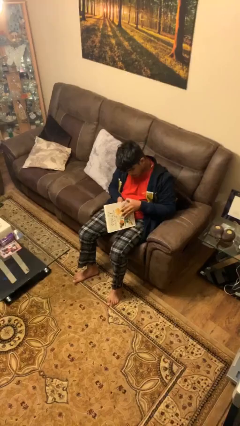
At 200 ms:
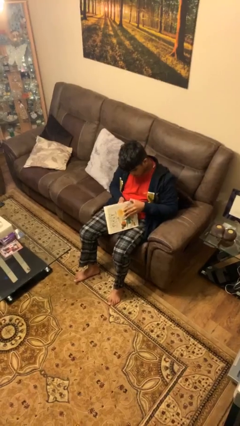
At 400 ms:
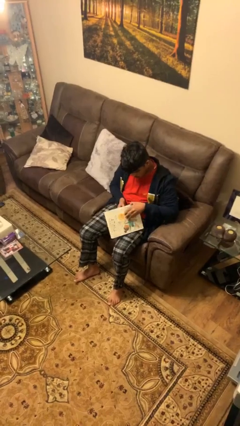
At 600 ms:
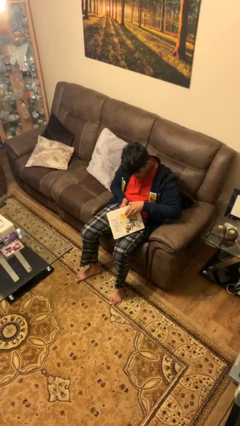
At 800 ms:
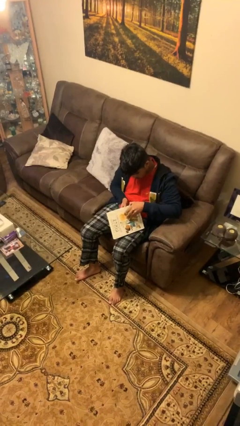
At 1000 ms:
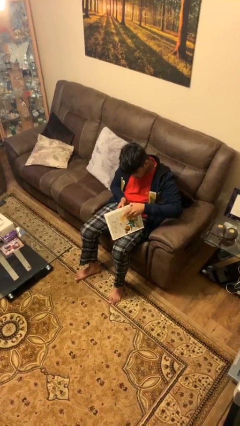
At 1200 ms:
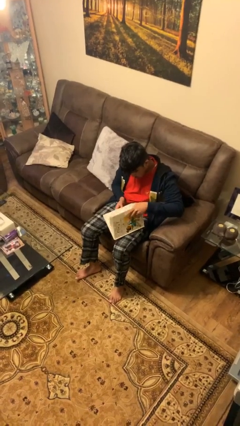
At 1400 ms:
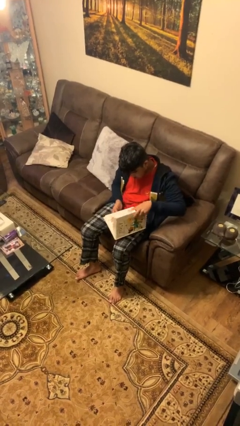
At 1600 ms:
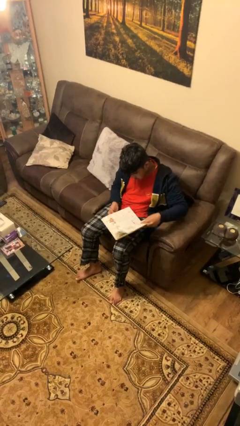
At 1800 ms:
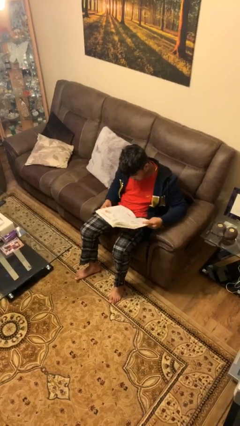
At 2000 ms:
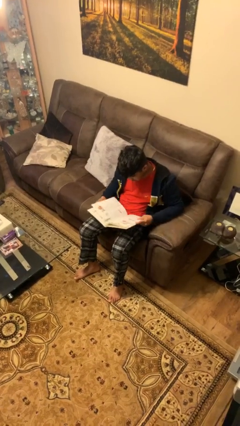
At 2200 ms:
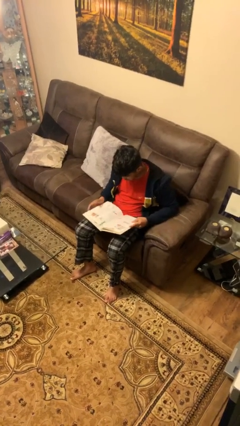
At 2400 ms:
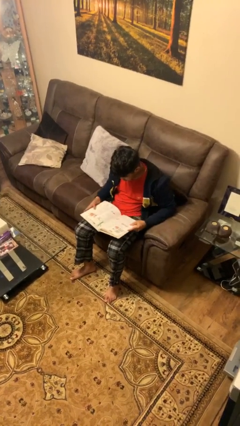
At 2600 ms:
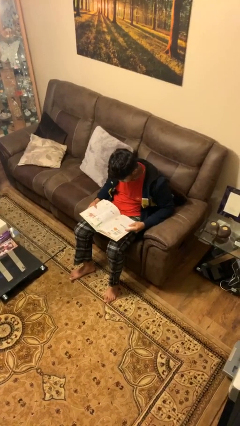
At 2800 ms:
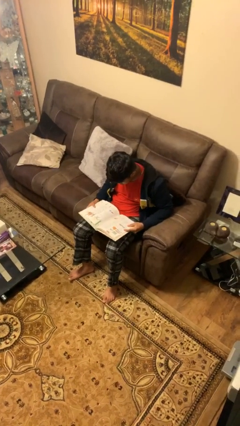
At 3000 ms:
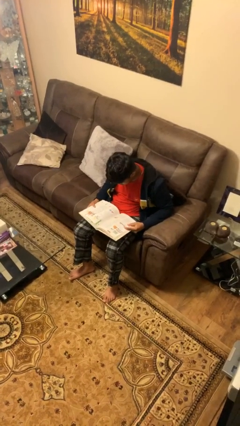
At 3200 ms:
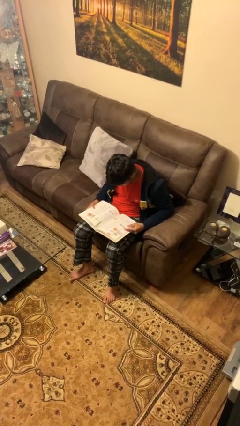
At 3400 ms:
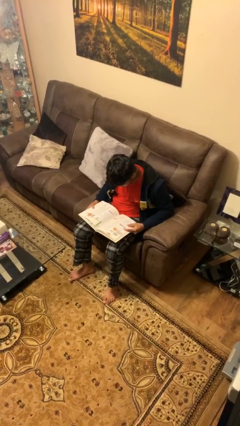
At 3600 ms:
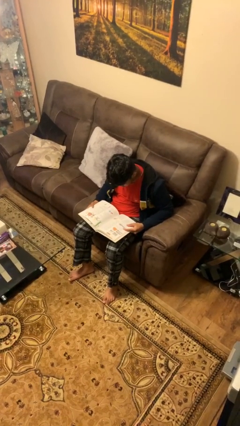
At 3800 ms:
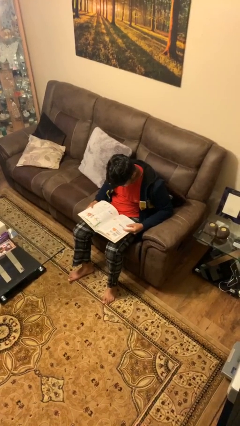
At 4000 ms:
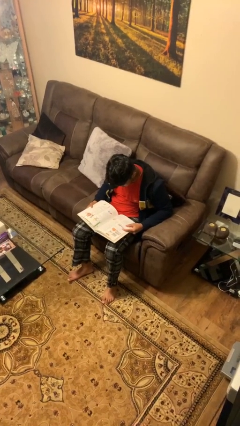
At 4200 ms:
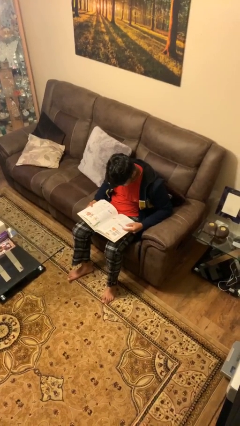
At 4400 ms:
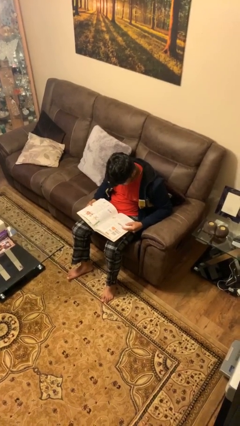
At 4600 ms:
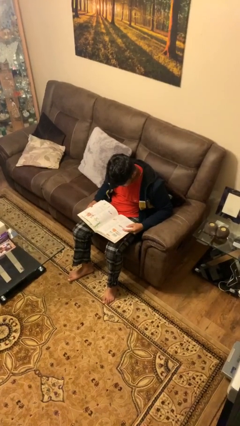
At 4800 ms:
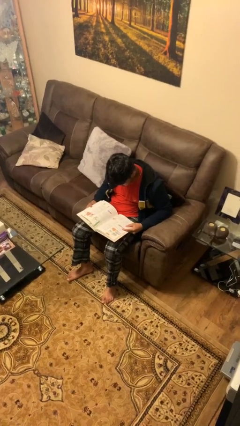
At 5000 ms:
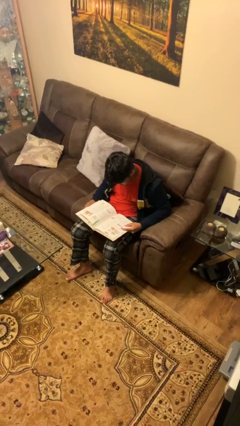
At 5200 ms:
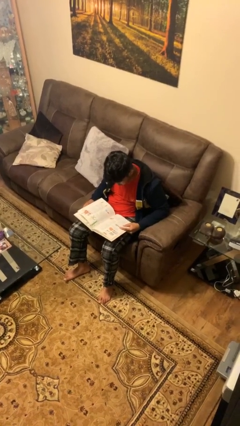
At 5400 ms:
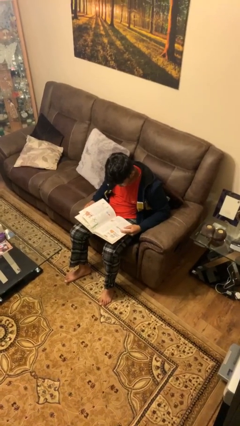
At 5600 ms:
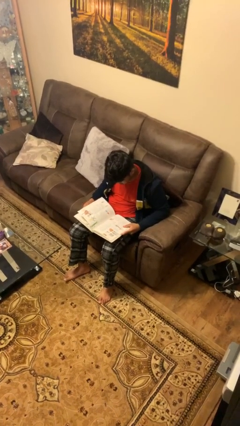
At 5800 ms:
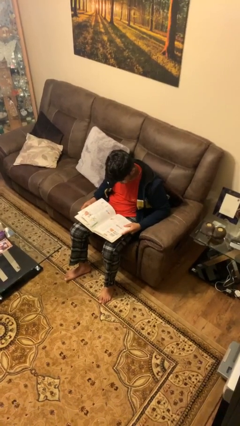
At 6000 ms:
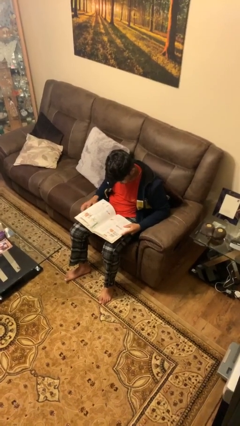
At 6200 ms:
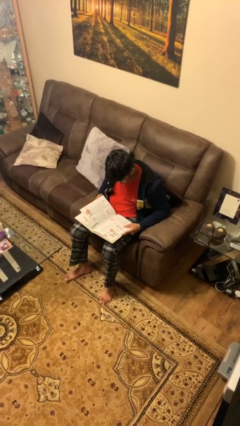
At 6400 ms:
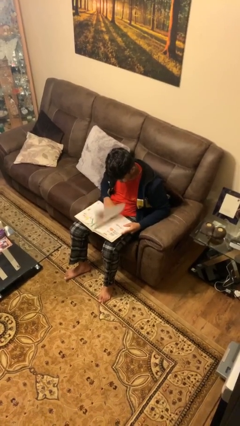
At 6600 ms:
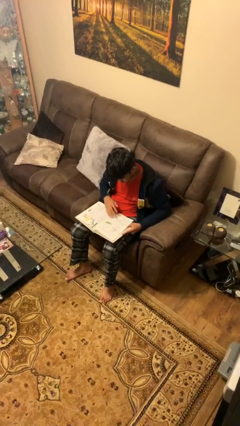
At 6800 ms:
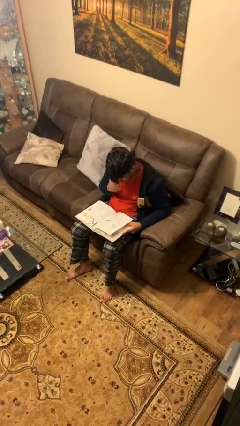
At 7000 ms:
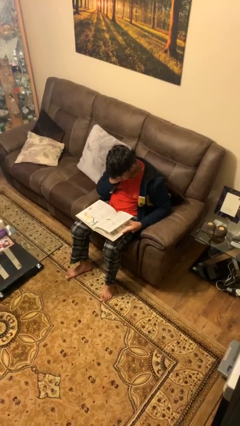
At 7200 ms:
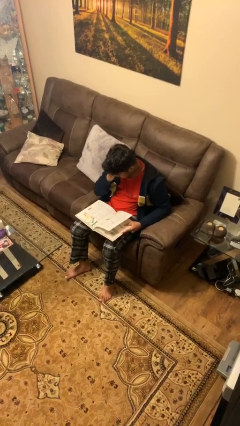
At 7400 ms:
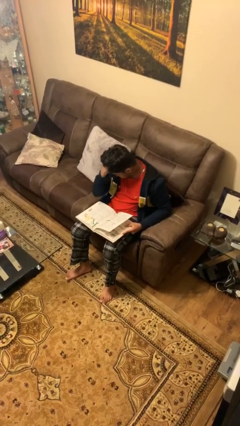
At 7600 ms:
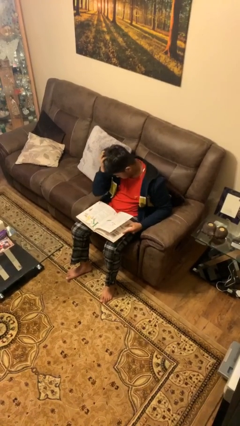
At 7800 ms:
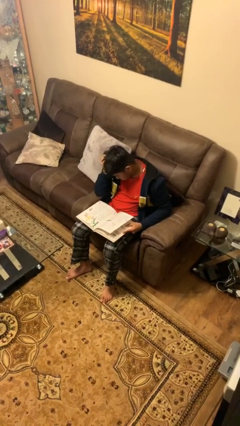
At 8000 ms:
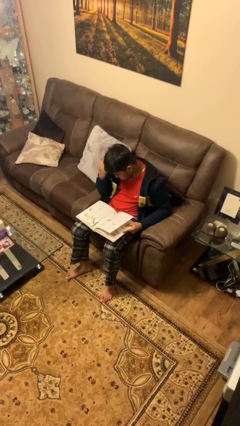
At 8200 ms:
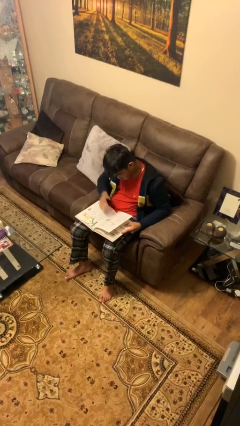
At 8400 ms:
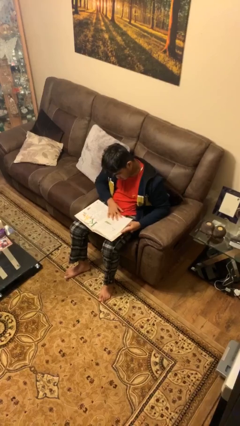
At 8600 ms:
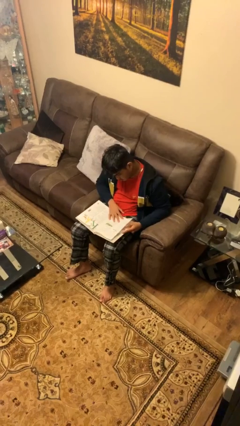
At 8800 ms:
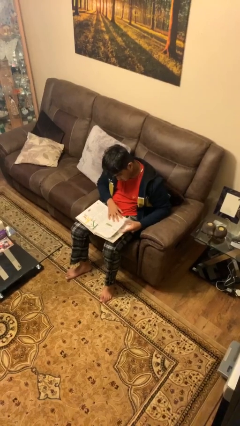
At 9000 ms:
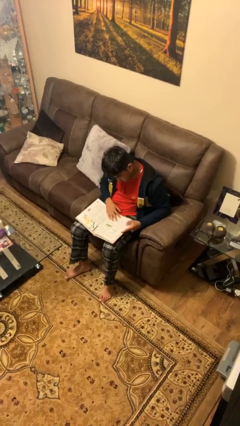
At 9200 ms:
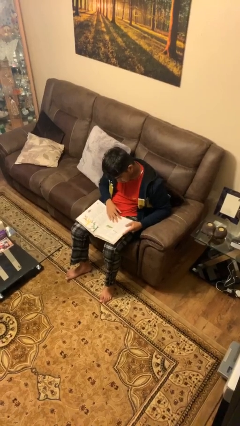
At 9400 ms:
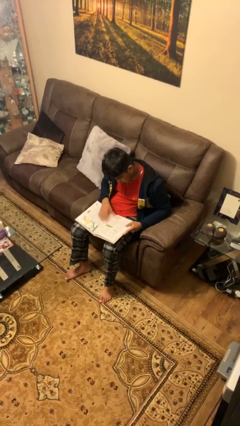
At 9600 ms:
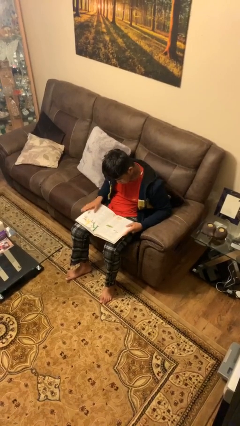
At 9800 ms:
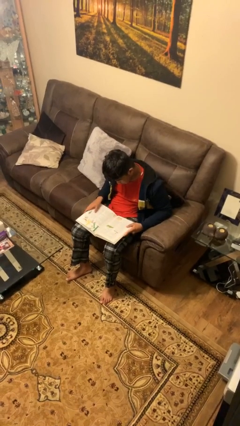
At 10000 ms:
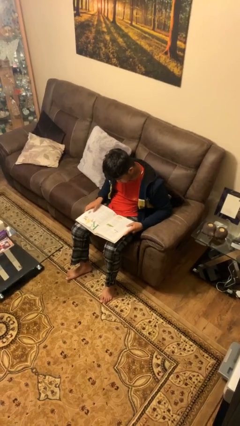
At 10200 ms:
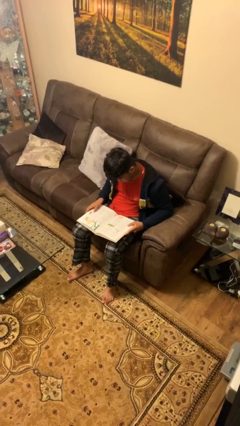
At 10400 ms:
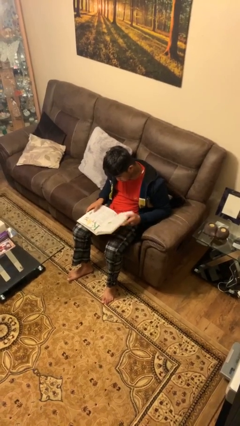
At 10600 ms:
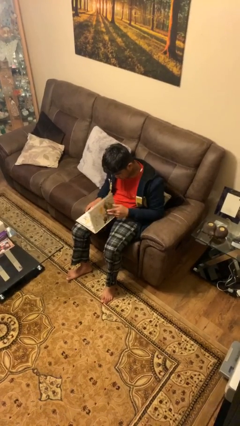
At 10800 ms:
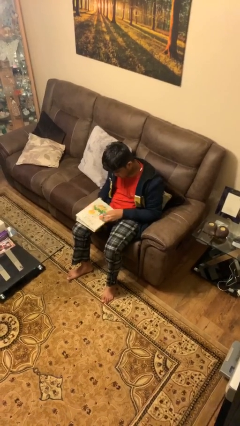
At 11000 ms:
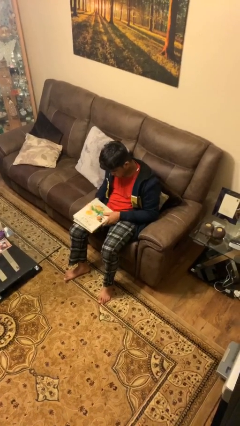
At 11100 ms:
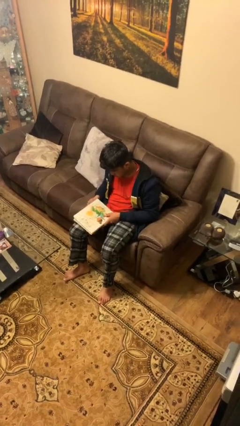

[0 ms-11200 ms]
person reads document

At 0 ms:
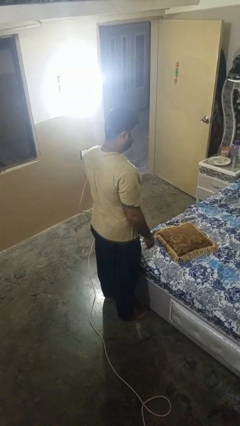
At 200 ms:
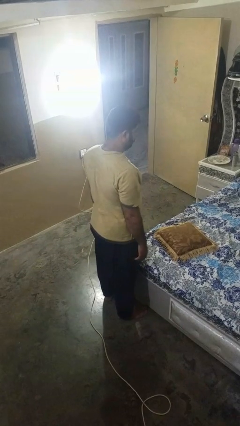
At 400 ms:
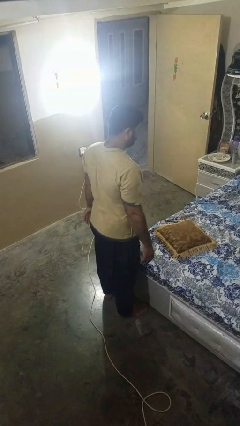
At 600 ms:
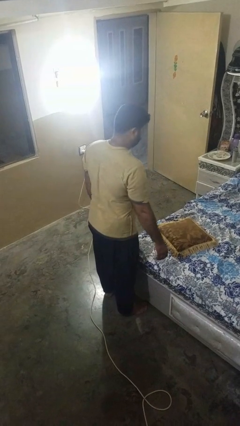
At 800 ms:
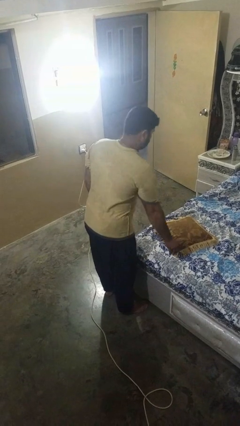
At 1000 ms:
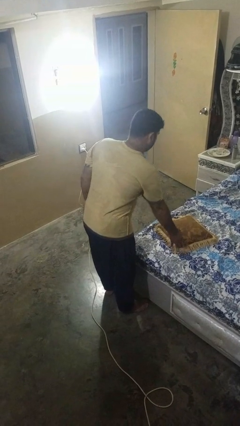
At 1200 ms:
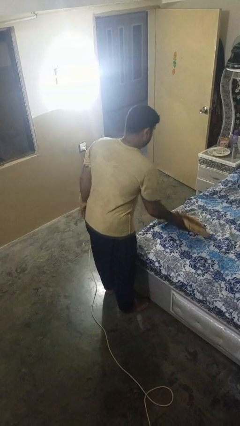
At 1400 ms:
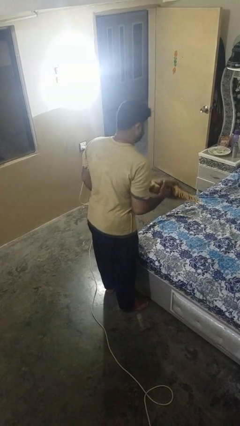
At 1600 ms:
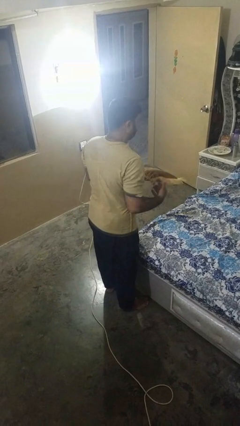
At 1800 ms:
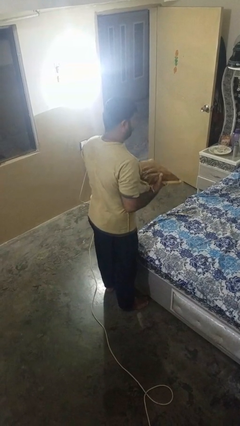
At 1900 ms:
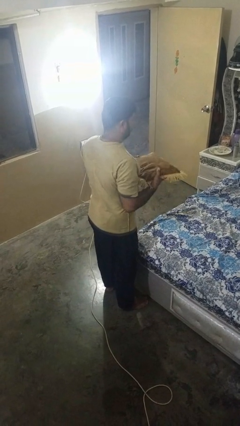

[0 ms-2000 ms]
person picks up object from bed

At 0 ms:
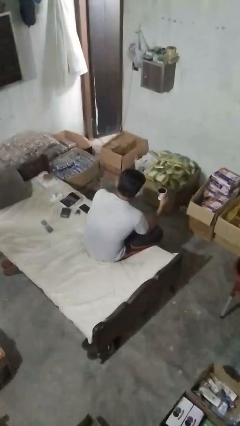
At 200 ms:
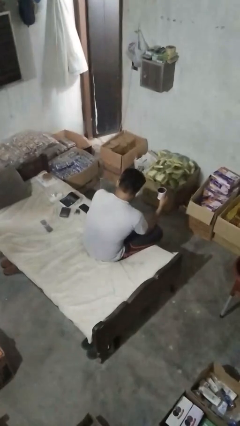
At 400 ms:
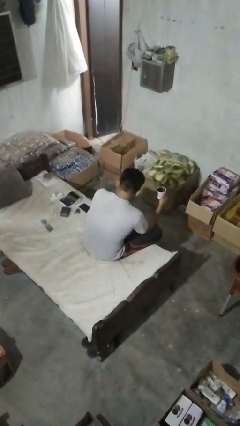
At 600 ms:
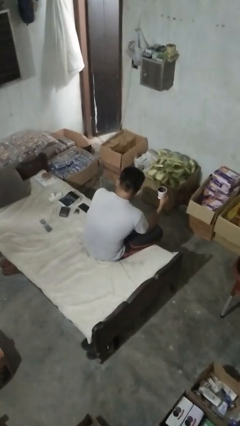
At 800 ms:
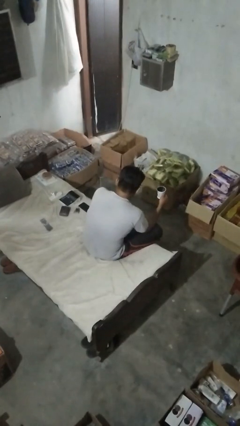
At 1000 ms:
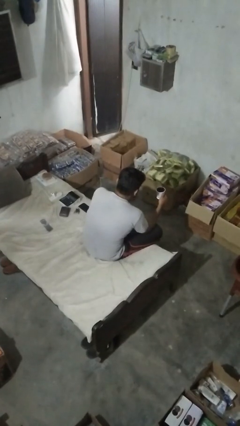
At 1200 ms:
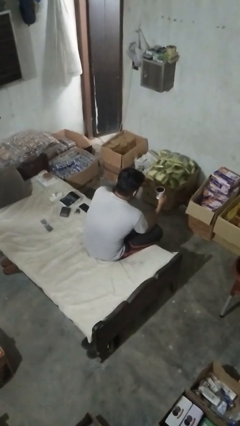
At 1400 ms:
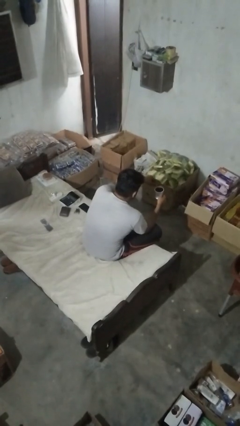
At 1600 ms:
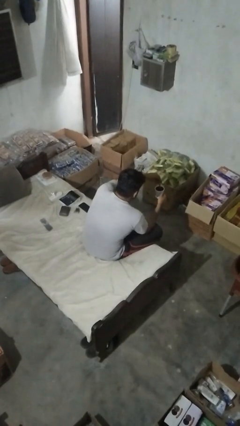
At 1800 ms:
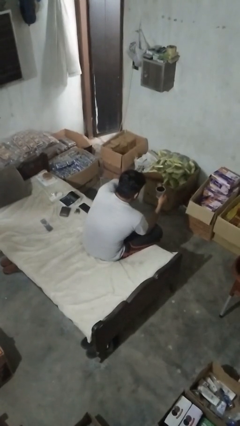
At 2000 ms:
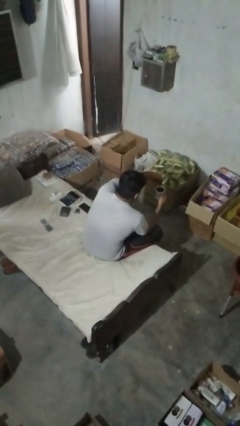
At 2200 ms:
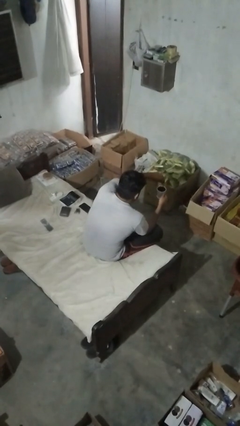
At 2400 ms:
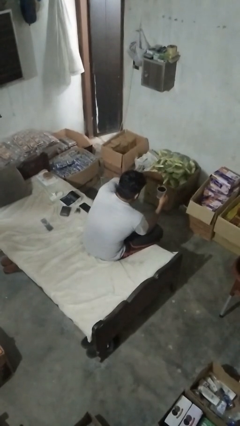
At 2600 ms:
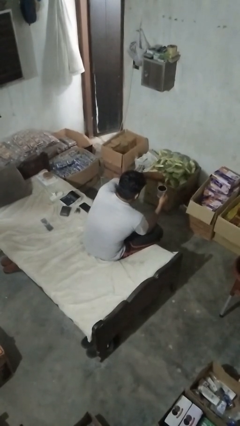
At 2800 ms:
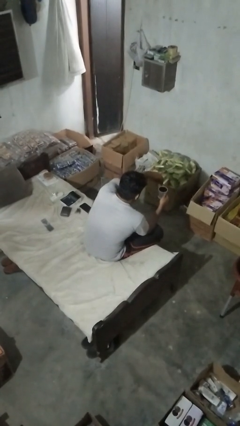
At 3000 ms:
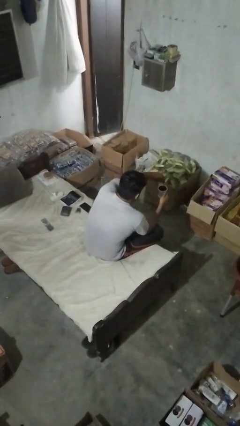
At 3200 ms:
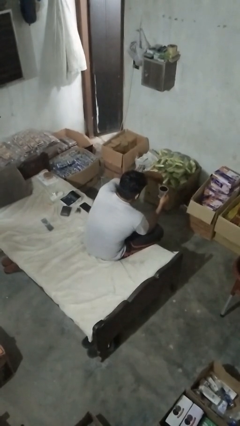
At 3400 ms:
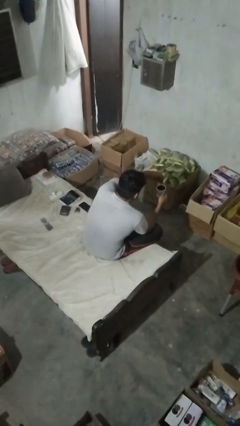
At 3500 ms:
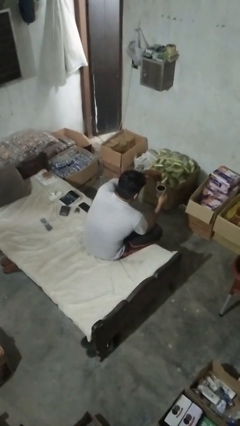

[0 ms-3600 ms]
person stirs mug

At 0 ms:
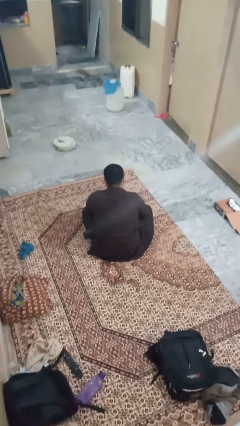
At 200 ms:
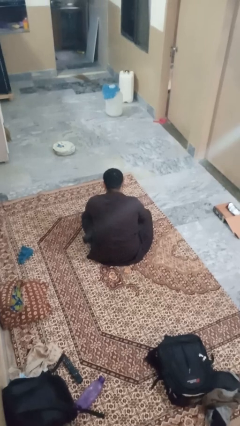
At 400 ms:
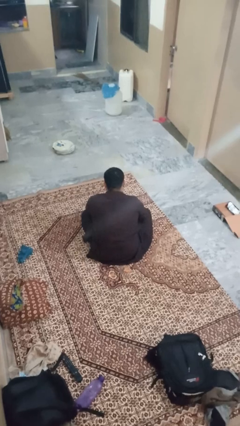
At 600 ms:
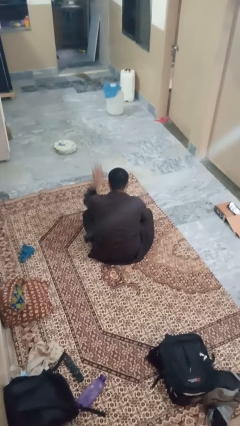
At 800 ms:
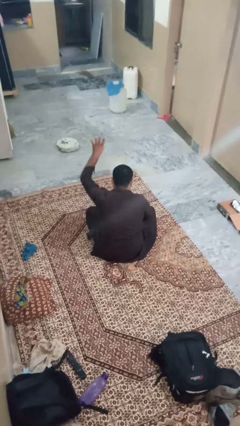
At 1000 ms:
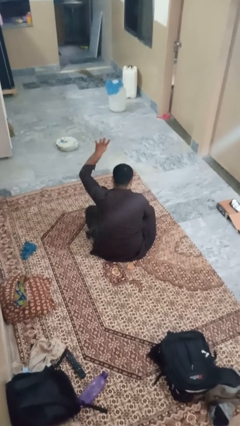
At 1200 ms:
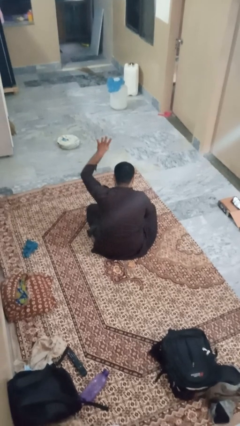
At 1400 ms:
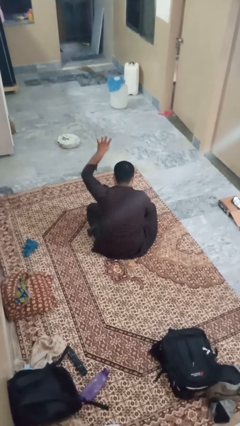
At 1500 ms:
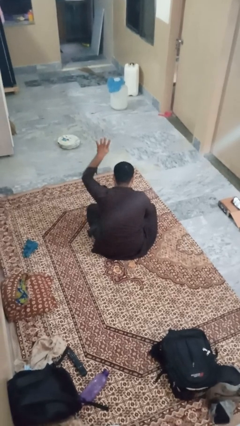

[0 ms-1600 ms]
person gestures number four
